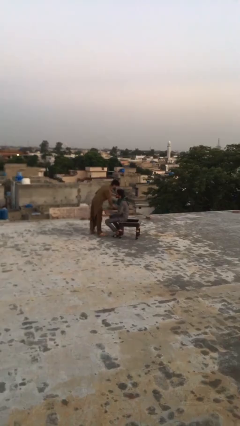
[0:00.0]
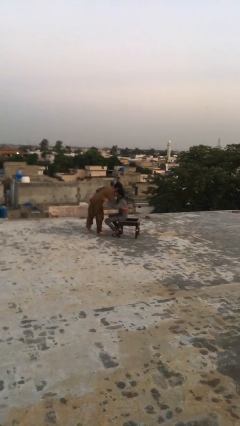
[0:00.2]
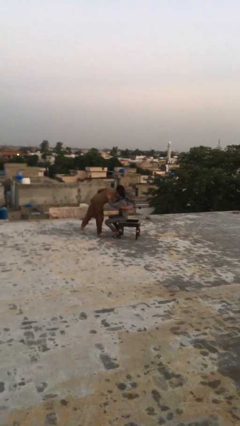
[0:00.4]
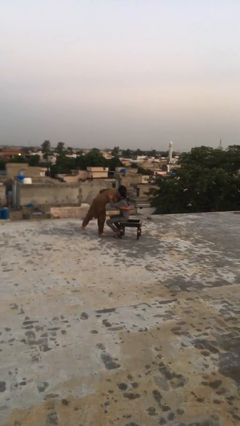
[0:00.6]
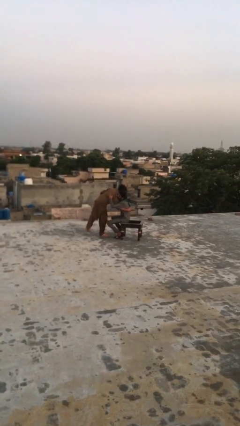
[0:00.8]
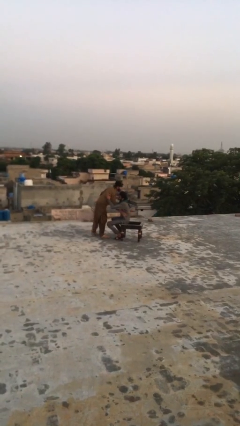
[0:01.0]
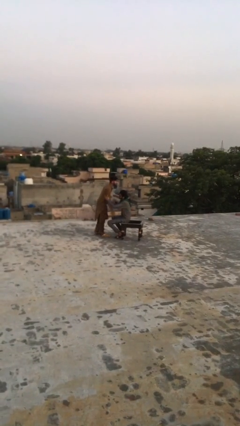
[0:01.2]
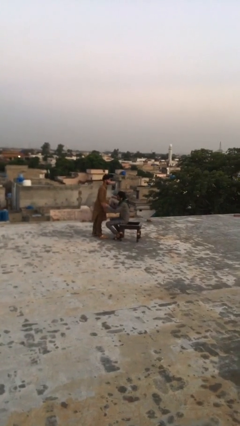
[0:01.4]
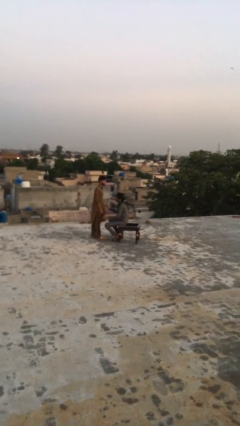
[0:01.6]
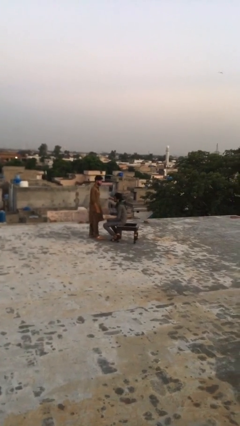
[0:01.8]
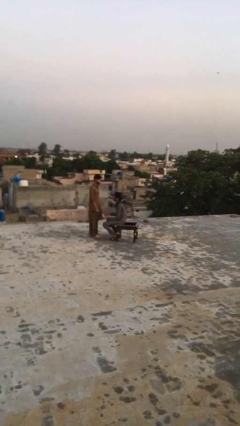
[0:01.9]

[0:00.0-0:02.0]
person embraces person

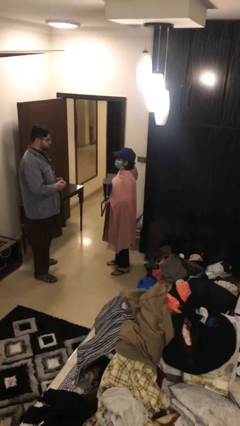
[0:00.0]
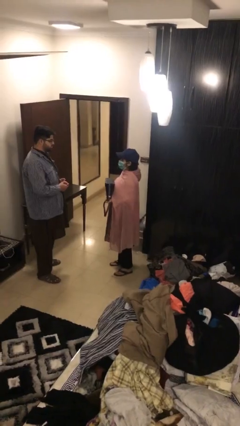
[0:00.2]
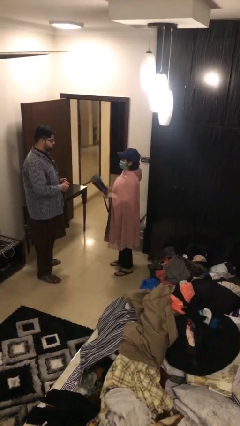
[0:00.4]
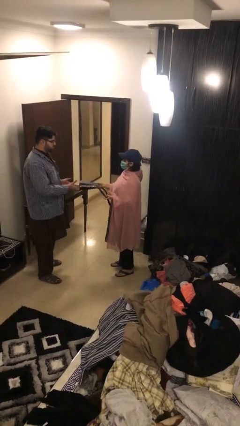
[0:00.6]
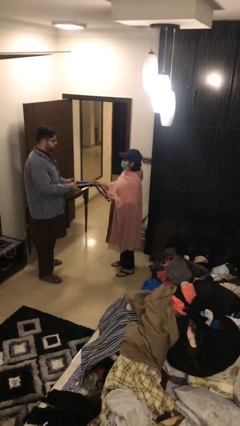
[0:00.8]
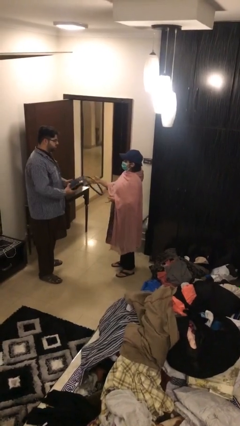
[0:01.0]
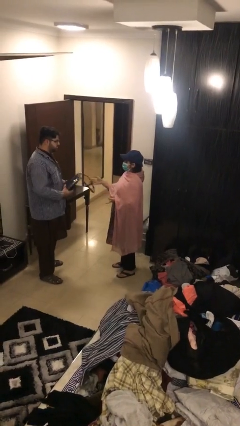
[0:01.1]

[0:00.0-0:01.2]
person transfers object to person

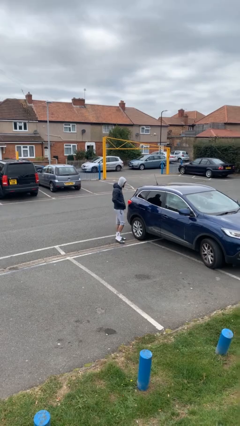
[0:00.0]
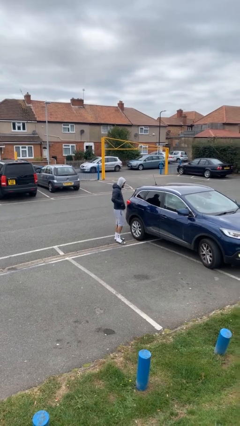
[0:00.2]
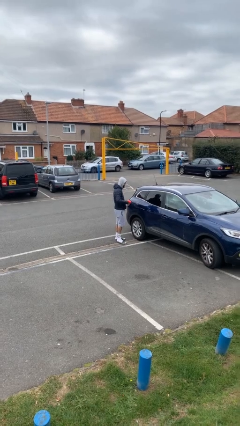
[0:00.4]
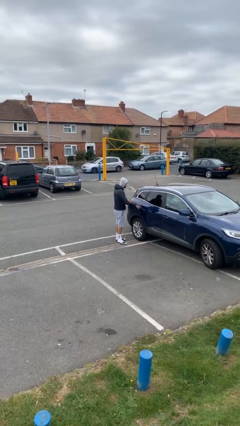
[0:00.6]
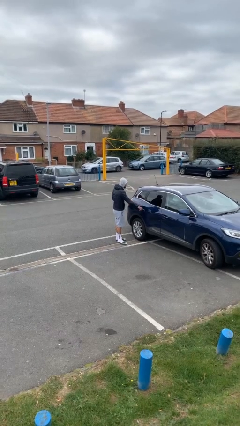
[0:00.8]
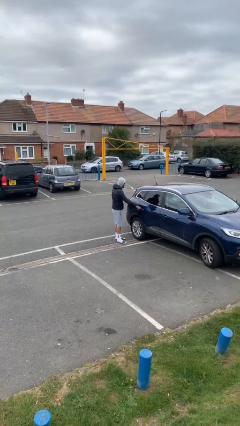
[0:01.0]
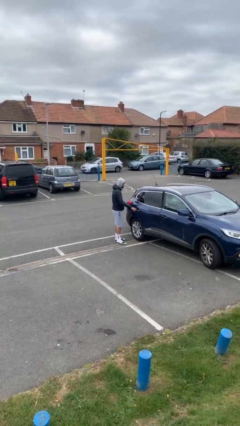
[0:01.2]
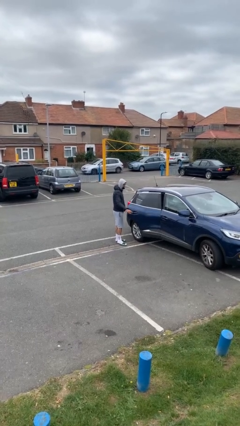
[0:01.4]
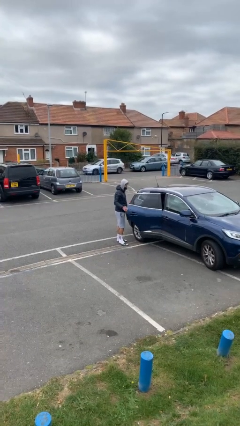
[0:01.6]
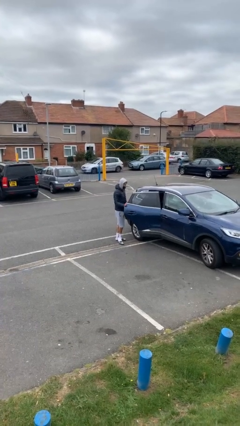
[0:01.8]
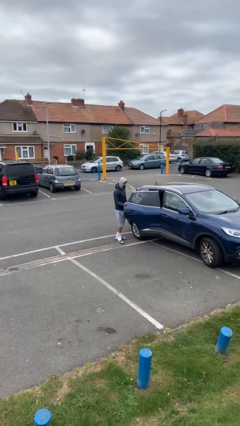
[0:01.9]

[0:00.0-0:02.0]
person opens car door

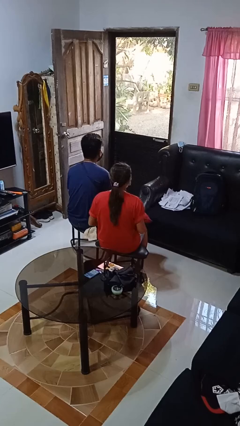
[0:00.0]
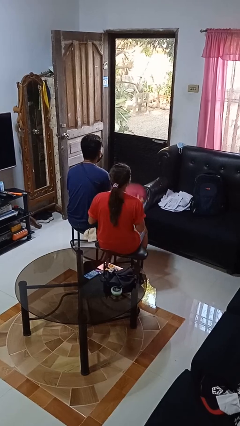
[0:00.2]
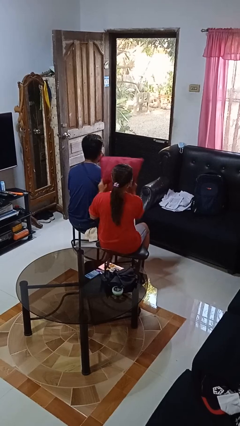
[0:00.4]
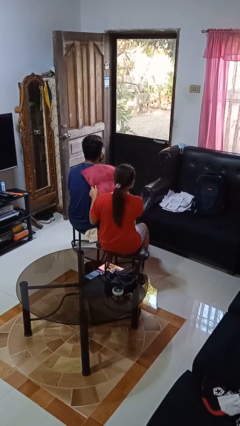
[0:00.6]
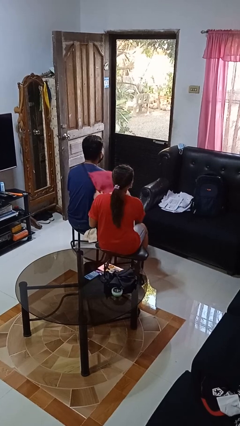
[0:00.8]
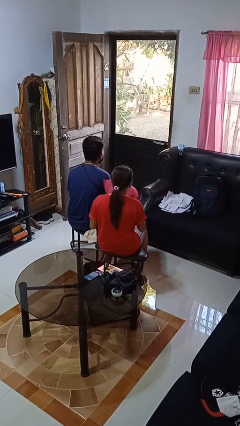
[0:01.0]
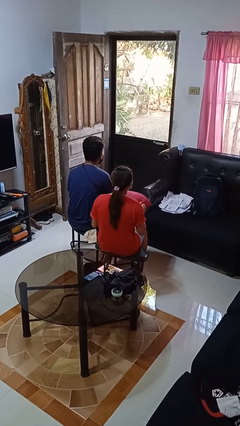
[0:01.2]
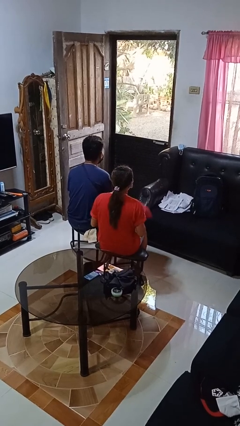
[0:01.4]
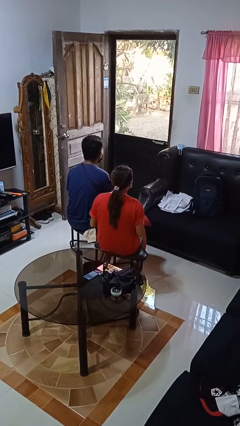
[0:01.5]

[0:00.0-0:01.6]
person hits person with pillow

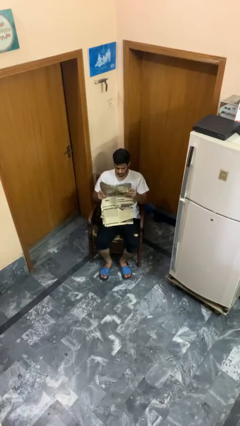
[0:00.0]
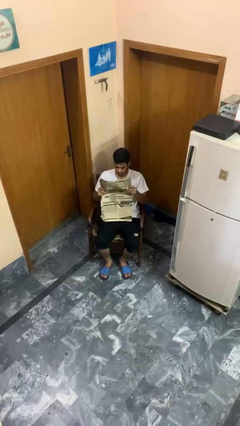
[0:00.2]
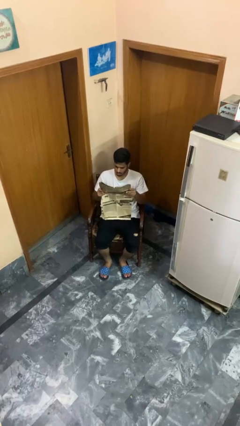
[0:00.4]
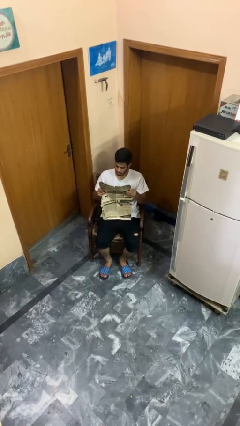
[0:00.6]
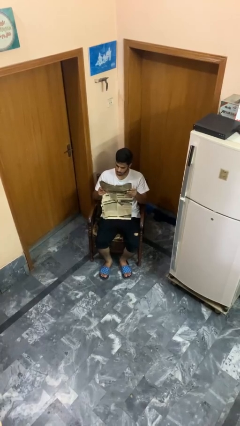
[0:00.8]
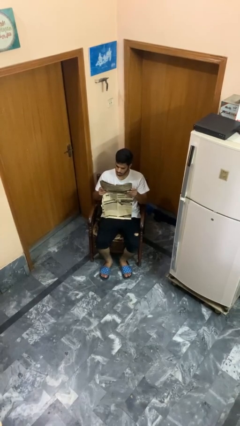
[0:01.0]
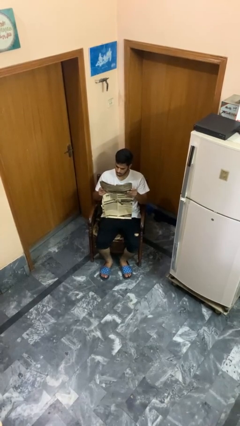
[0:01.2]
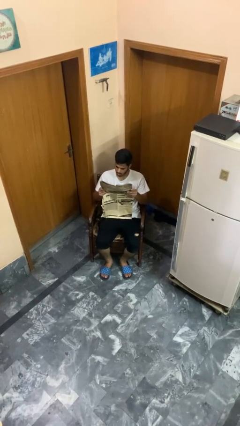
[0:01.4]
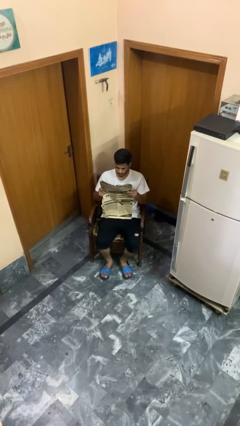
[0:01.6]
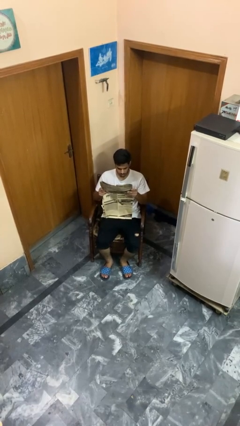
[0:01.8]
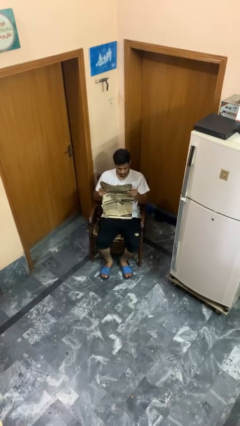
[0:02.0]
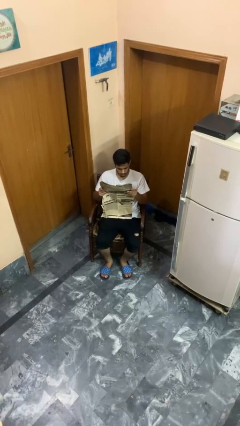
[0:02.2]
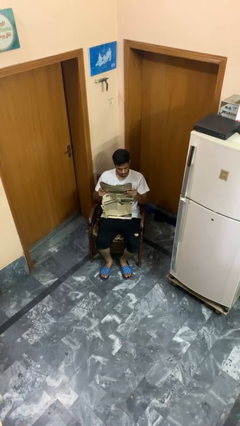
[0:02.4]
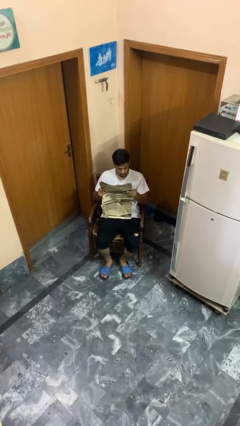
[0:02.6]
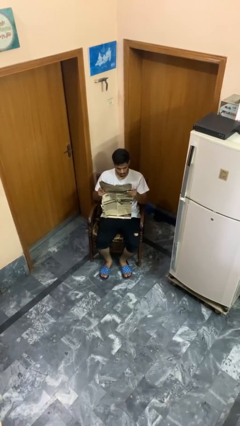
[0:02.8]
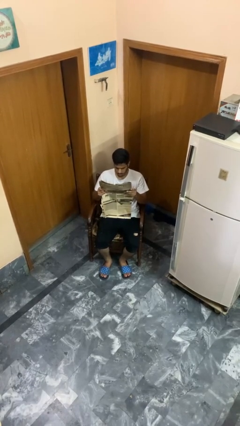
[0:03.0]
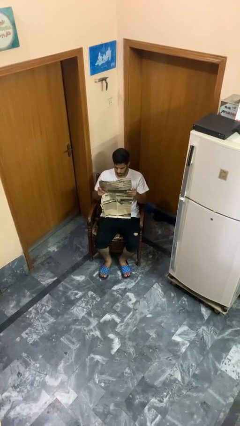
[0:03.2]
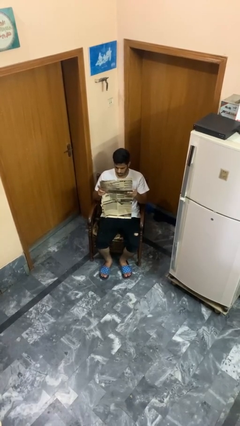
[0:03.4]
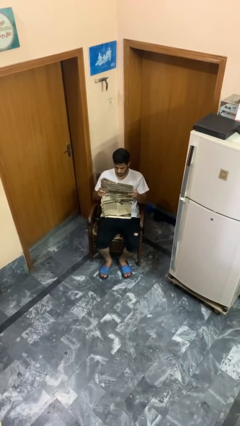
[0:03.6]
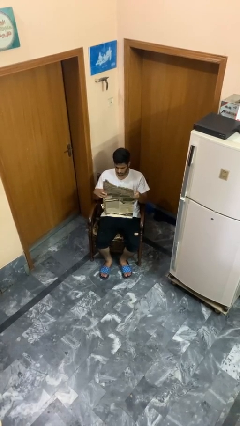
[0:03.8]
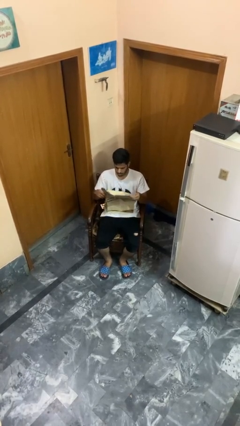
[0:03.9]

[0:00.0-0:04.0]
person reads newspaper

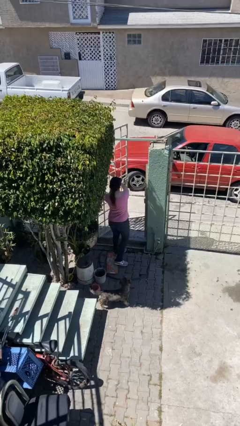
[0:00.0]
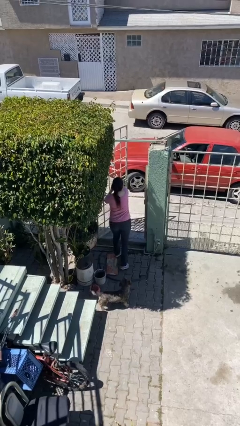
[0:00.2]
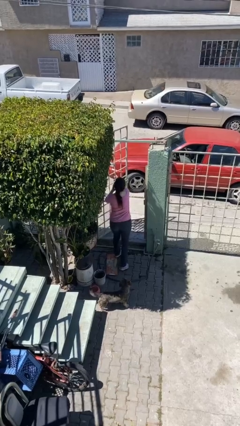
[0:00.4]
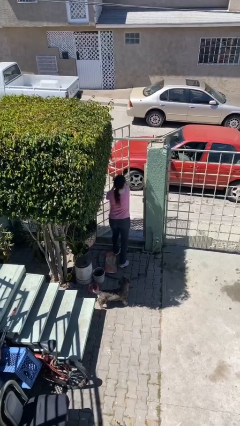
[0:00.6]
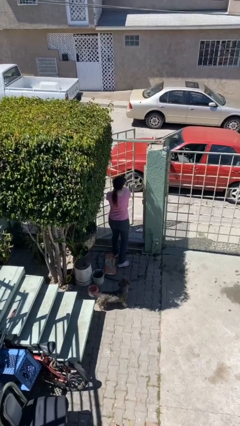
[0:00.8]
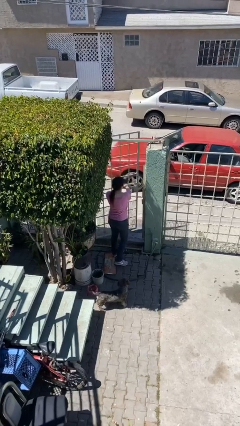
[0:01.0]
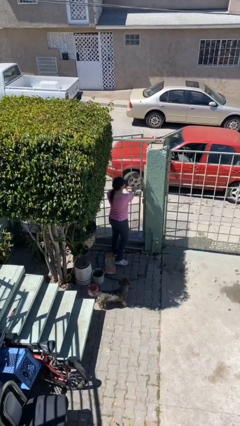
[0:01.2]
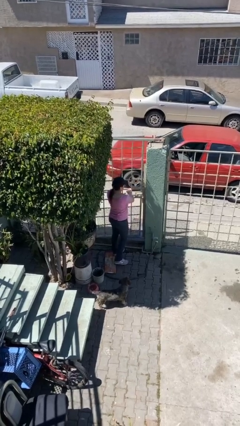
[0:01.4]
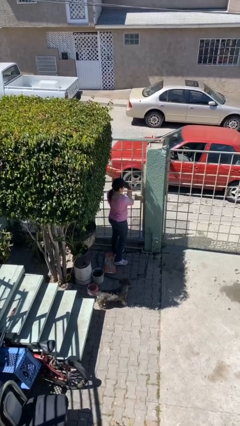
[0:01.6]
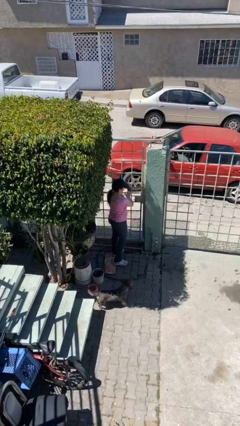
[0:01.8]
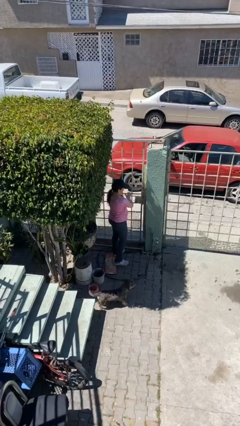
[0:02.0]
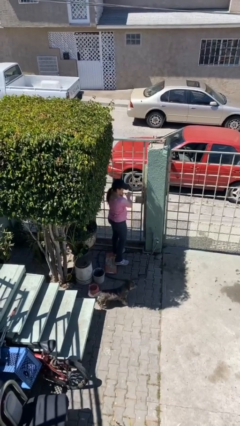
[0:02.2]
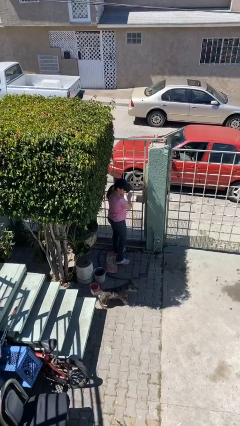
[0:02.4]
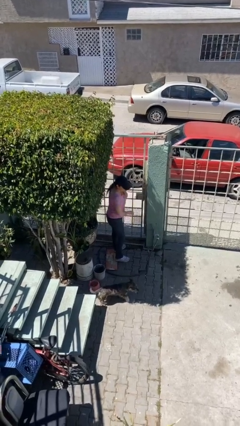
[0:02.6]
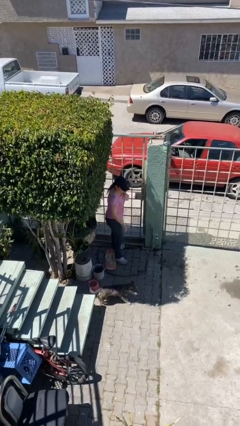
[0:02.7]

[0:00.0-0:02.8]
person closes facility door

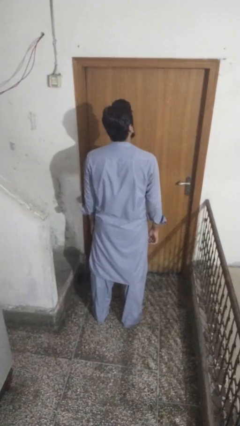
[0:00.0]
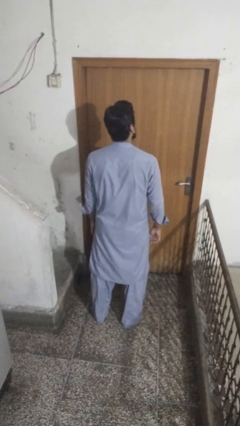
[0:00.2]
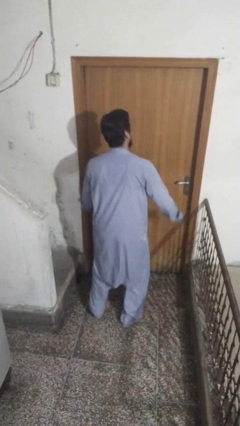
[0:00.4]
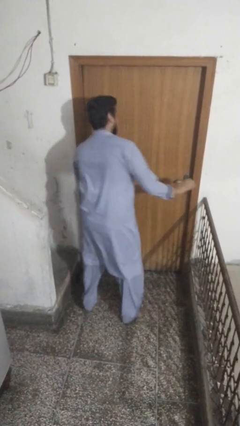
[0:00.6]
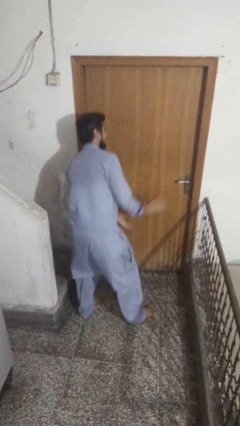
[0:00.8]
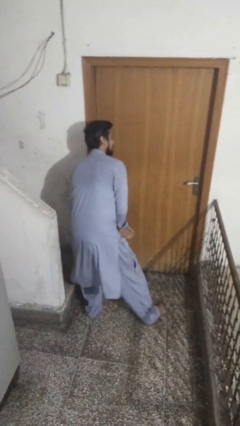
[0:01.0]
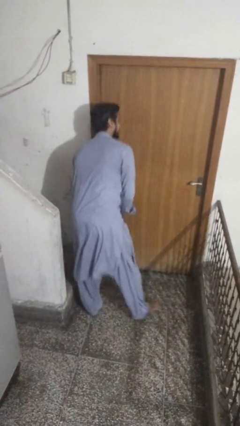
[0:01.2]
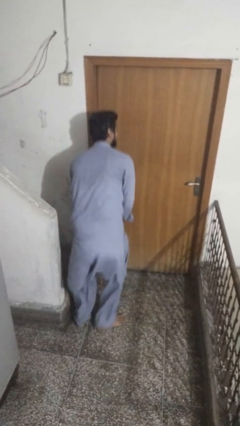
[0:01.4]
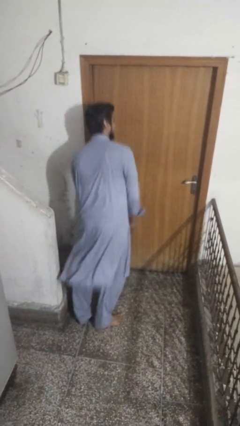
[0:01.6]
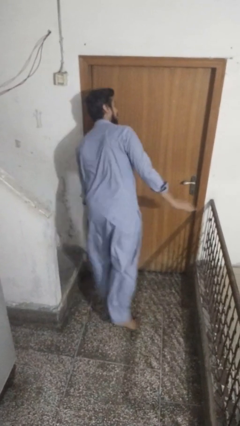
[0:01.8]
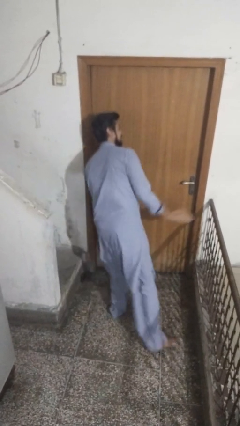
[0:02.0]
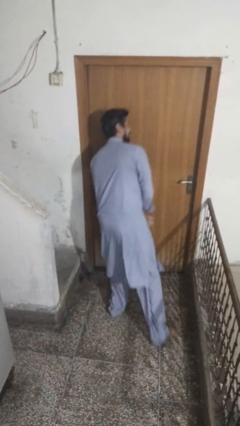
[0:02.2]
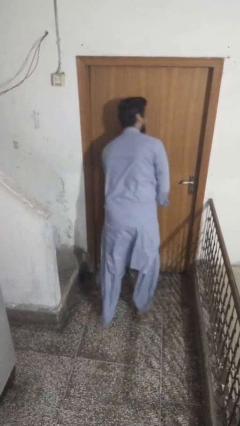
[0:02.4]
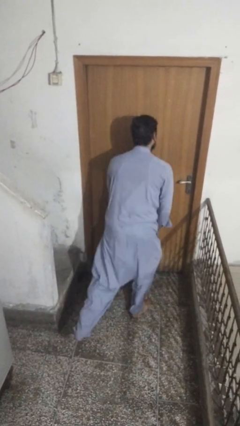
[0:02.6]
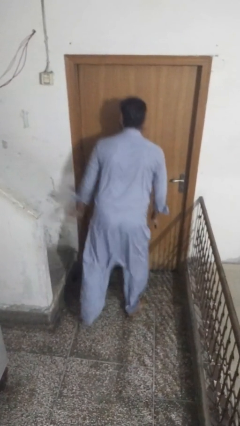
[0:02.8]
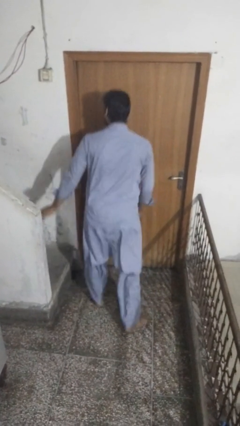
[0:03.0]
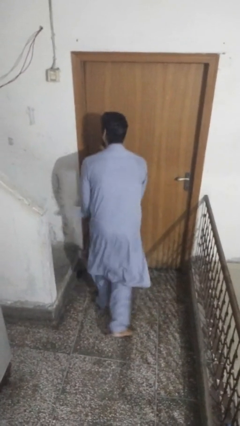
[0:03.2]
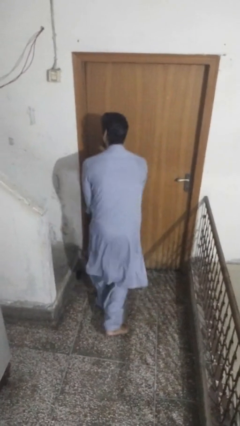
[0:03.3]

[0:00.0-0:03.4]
person dances in place
